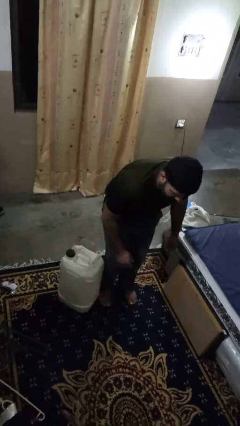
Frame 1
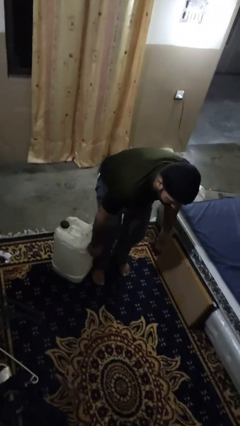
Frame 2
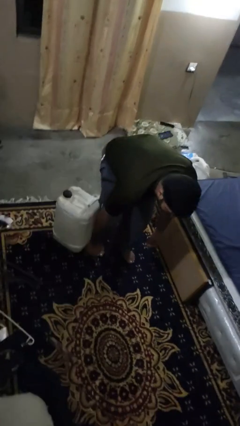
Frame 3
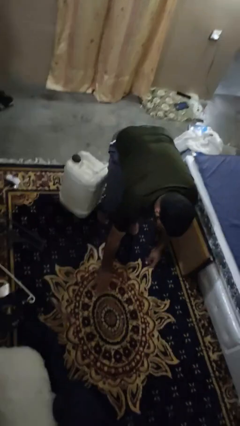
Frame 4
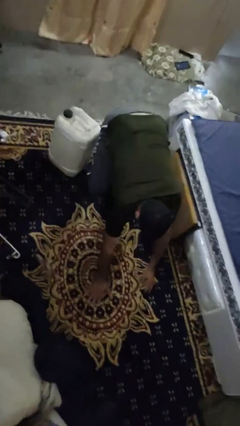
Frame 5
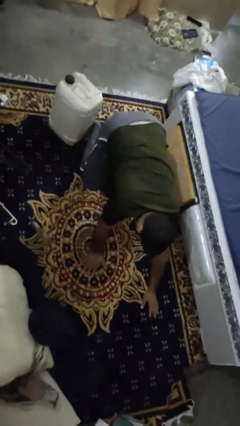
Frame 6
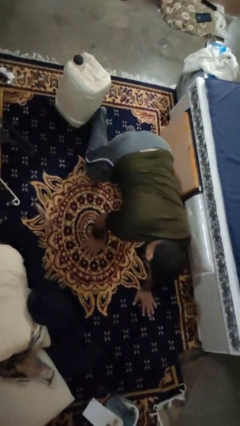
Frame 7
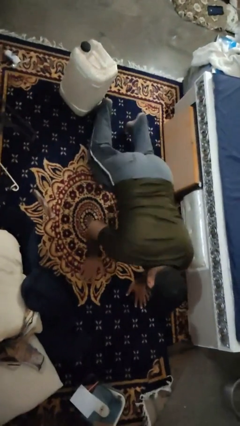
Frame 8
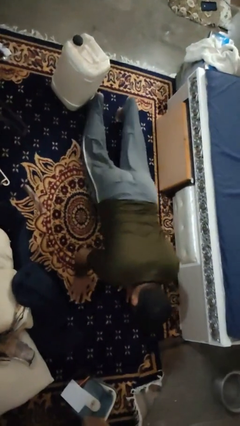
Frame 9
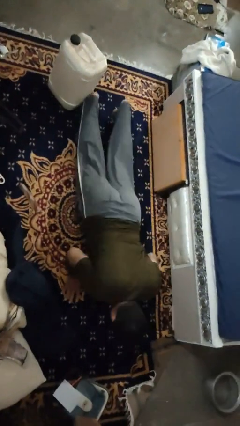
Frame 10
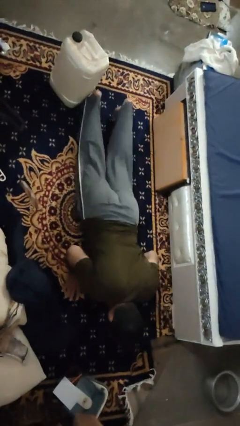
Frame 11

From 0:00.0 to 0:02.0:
person lies down on floor

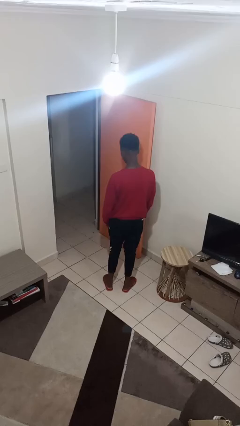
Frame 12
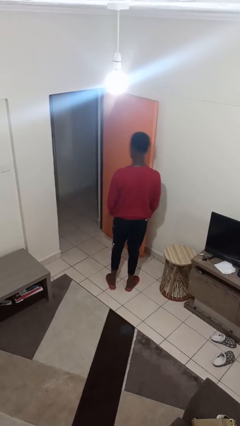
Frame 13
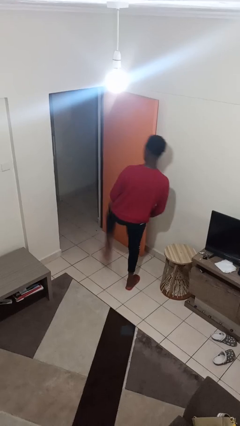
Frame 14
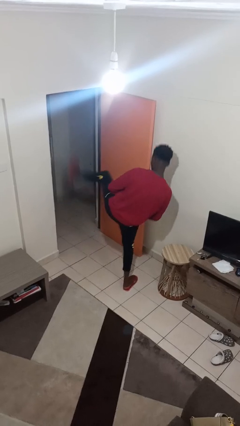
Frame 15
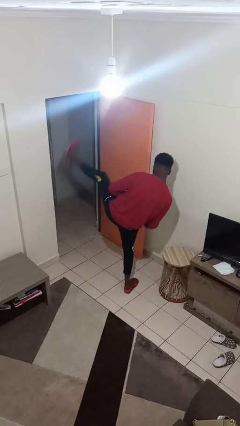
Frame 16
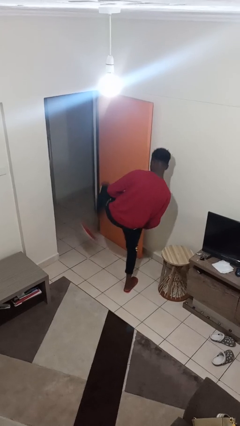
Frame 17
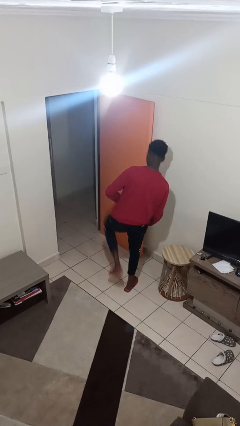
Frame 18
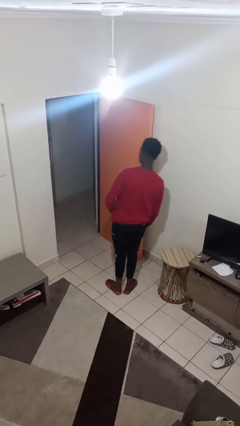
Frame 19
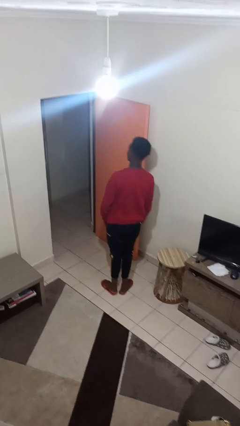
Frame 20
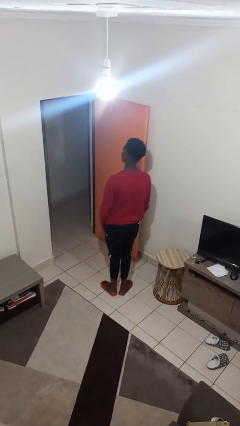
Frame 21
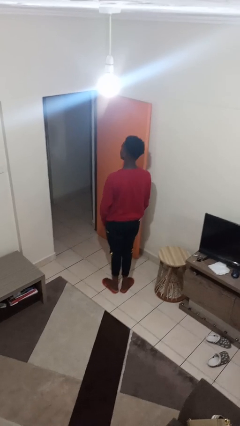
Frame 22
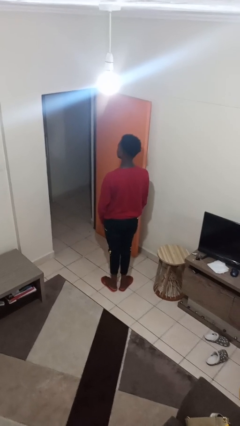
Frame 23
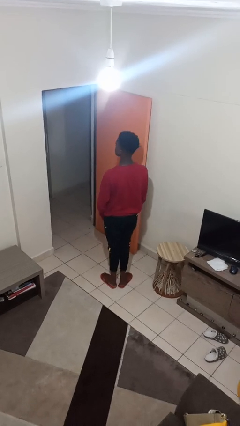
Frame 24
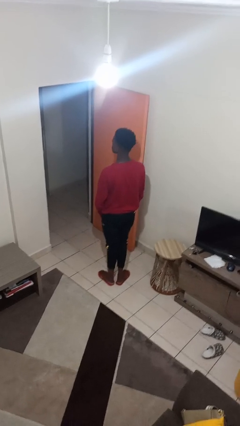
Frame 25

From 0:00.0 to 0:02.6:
person karate kicks

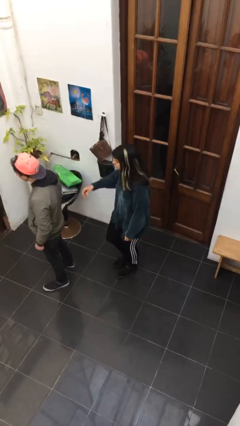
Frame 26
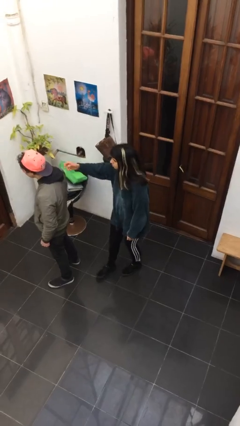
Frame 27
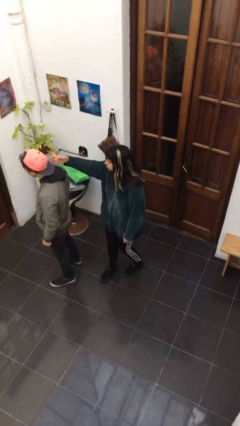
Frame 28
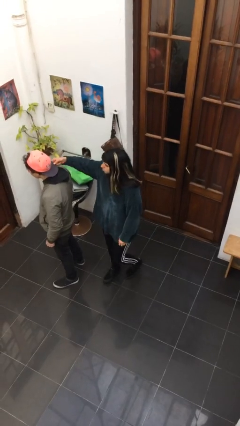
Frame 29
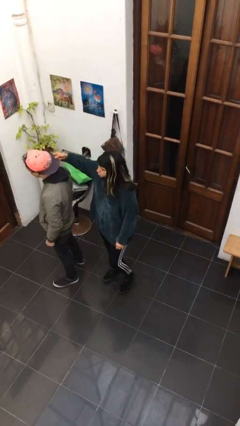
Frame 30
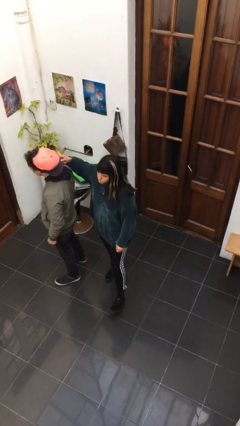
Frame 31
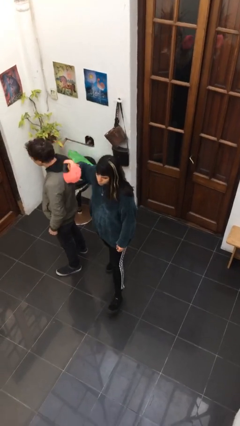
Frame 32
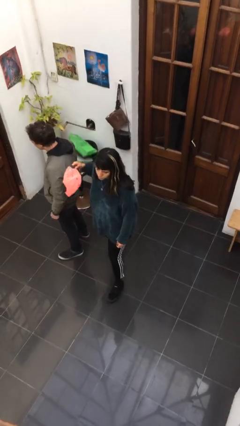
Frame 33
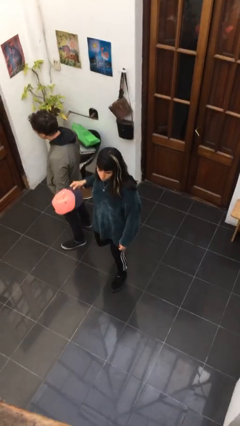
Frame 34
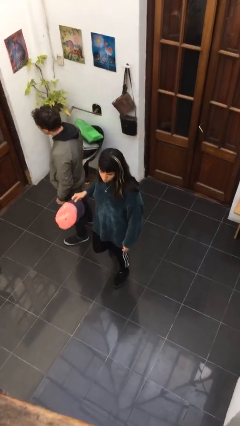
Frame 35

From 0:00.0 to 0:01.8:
person steals object from person

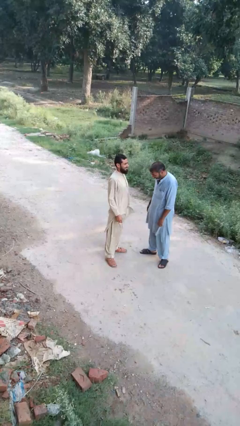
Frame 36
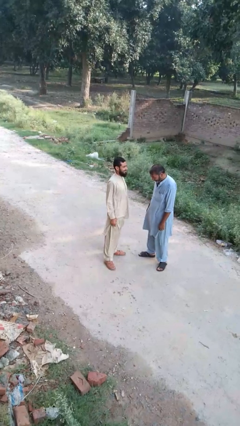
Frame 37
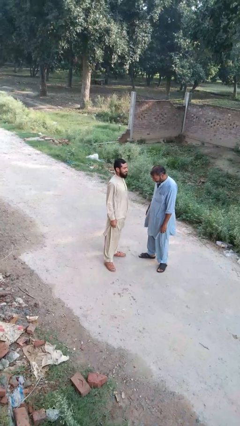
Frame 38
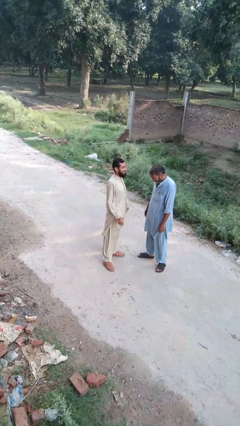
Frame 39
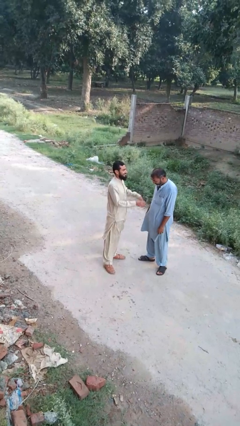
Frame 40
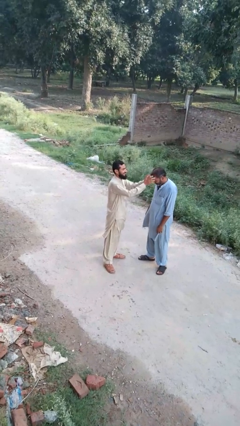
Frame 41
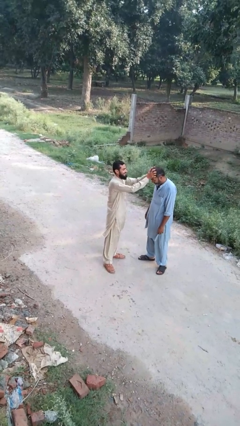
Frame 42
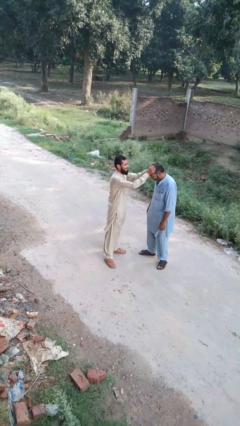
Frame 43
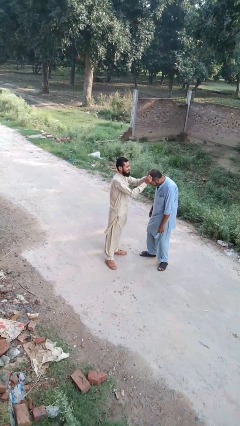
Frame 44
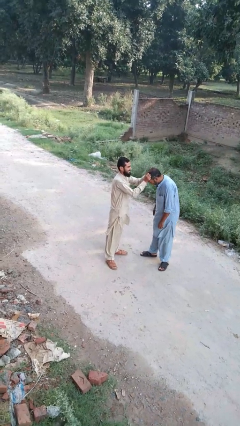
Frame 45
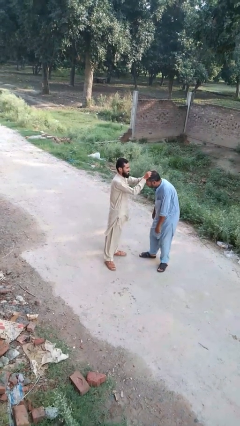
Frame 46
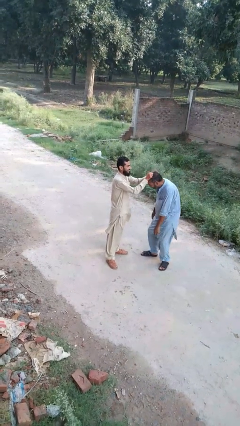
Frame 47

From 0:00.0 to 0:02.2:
person grabs person by hair

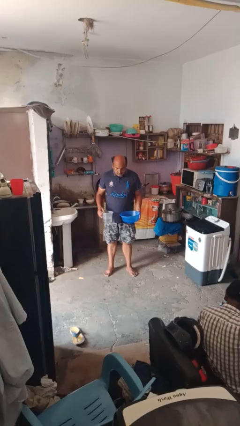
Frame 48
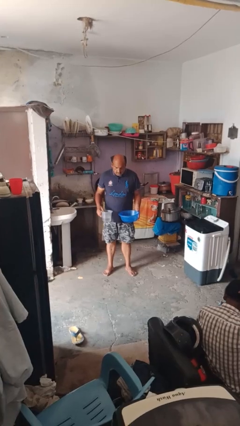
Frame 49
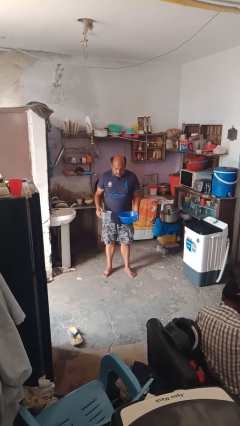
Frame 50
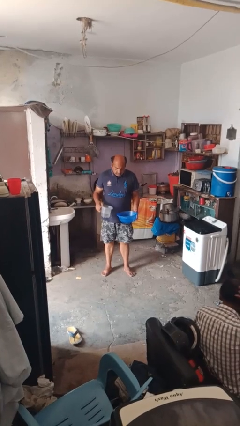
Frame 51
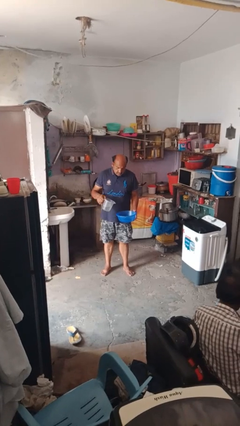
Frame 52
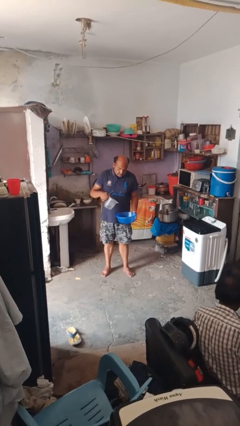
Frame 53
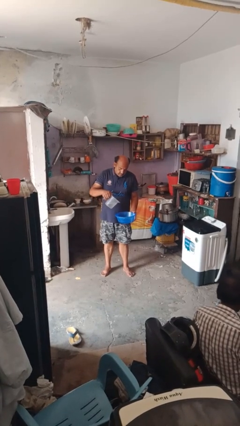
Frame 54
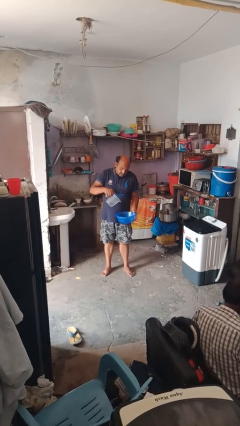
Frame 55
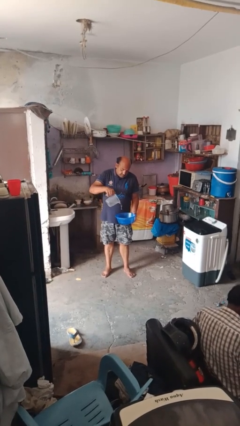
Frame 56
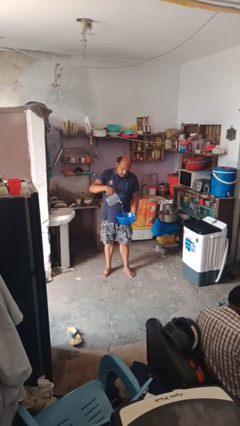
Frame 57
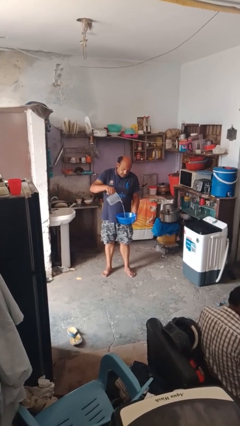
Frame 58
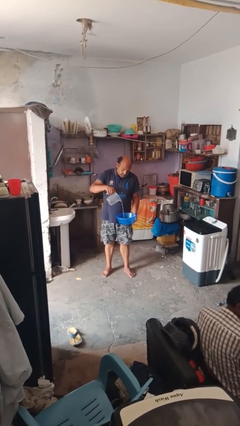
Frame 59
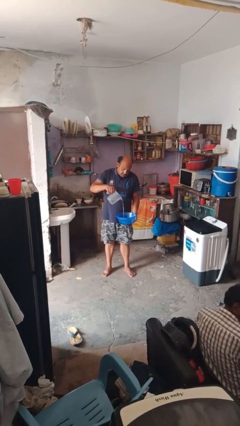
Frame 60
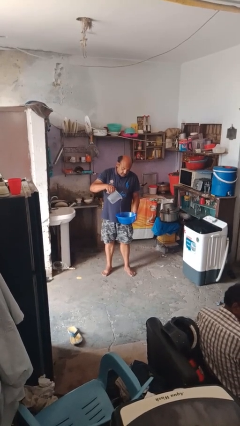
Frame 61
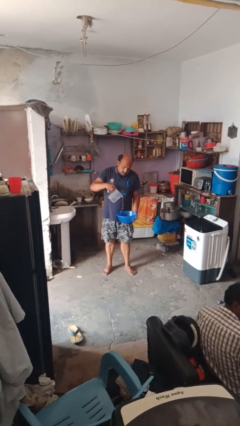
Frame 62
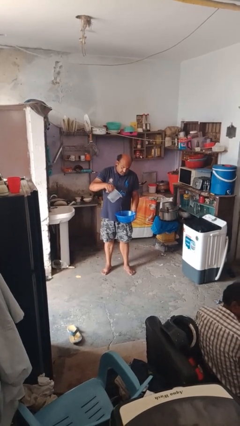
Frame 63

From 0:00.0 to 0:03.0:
person pours into bowl

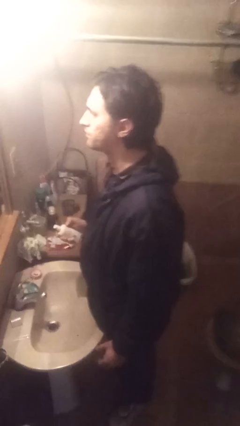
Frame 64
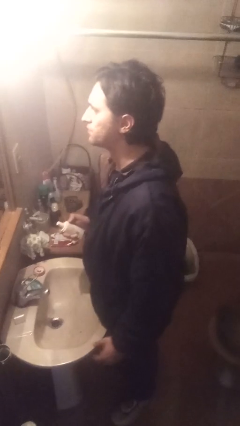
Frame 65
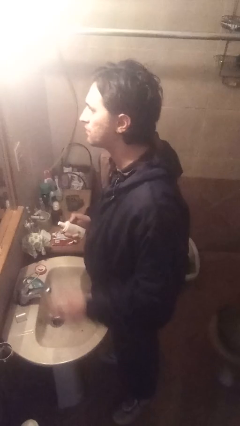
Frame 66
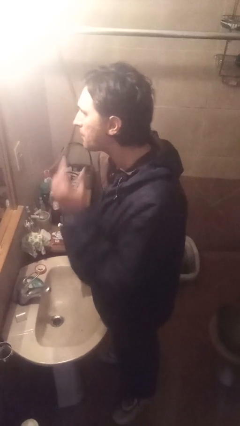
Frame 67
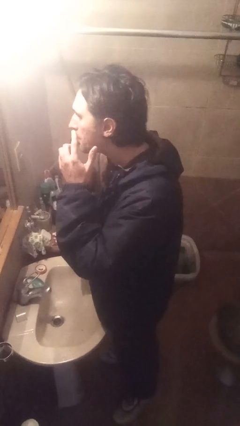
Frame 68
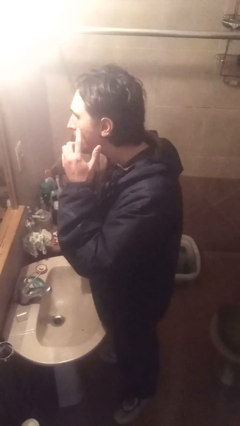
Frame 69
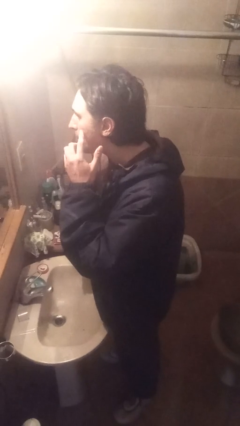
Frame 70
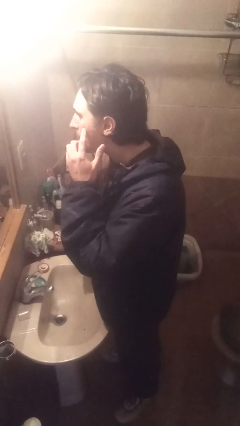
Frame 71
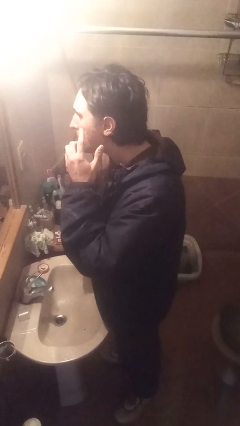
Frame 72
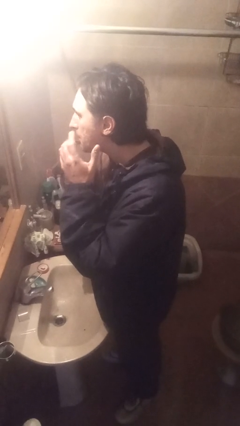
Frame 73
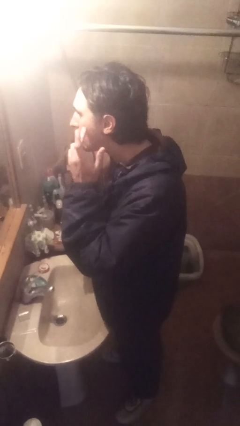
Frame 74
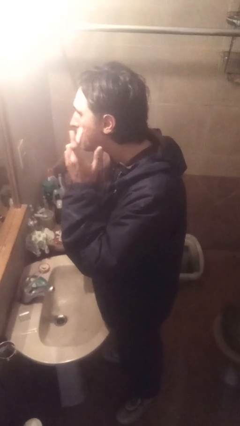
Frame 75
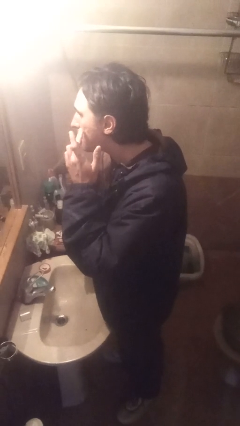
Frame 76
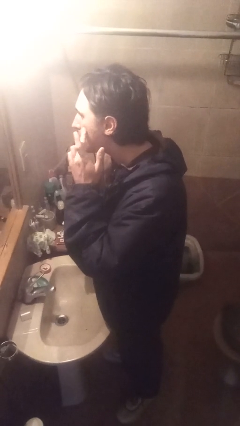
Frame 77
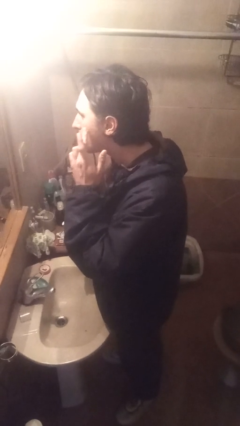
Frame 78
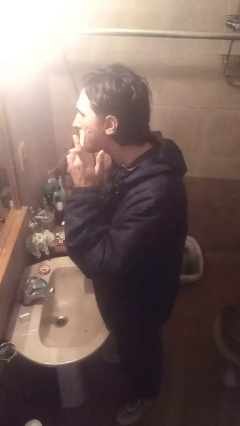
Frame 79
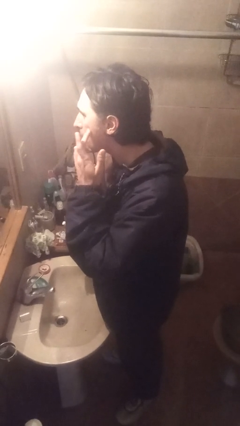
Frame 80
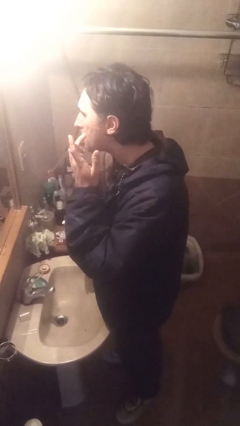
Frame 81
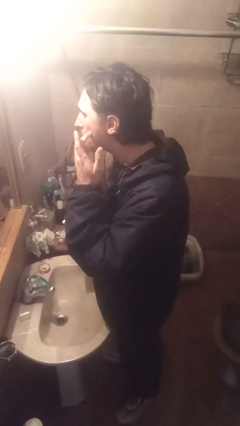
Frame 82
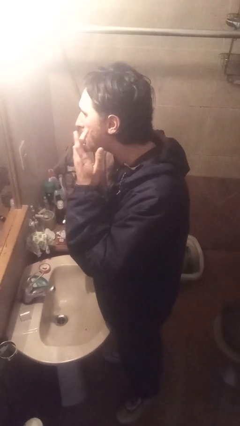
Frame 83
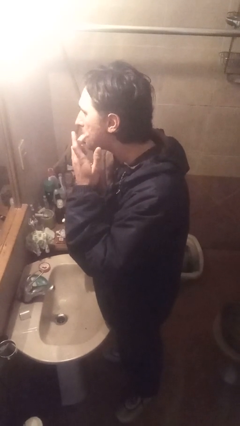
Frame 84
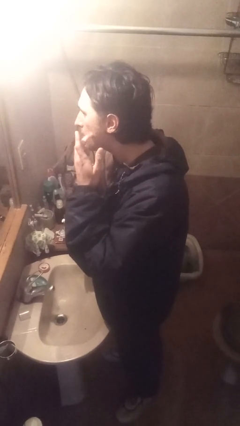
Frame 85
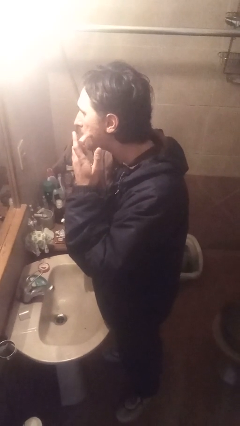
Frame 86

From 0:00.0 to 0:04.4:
person applies foundation makeup

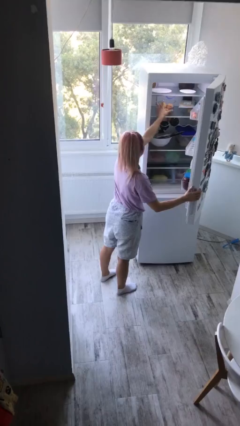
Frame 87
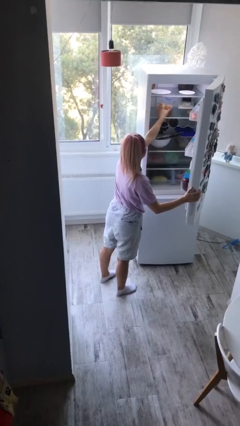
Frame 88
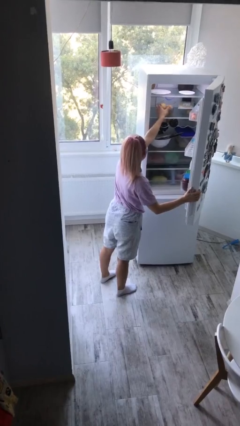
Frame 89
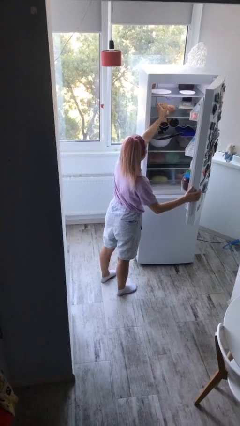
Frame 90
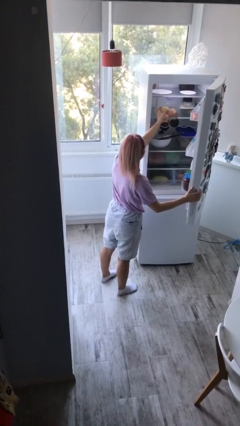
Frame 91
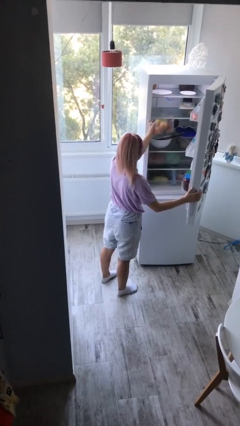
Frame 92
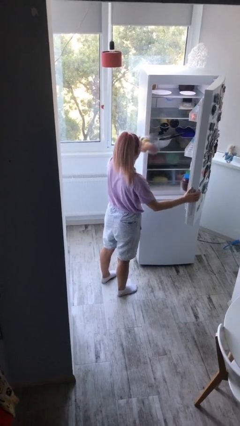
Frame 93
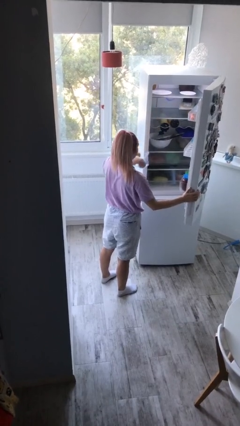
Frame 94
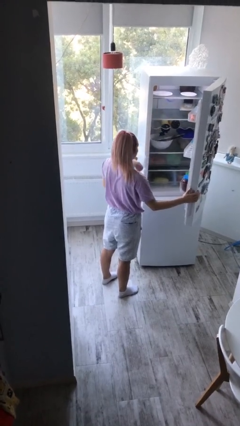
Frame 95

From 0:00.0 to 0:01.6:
person takes object from refrigerator
